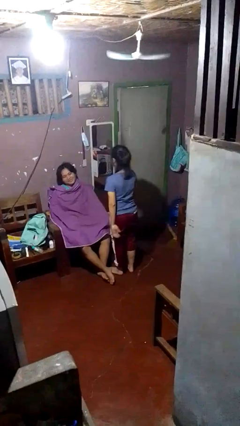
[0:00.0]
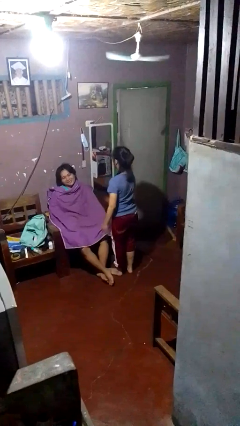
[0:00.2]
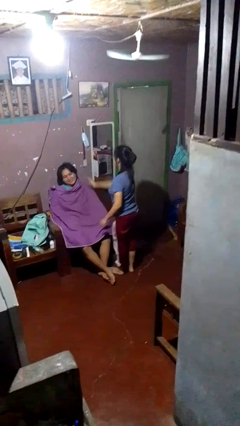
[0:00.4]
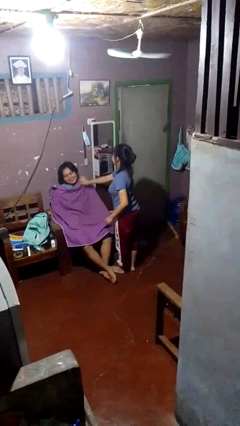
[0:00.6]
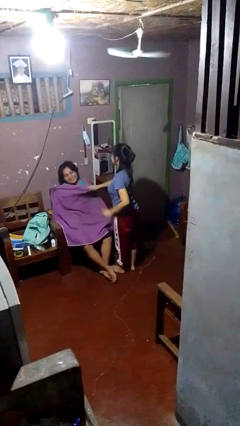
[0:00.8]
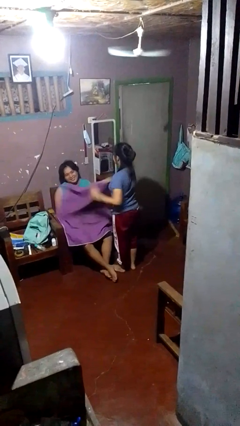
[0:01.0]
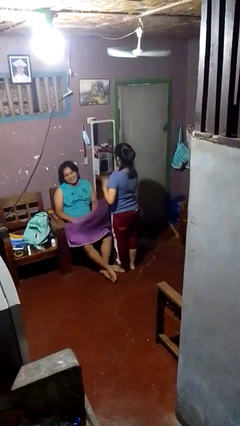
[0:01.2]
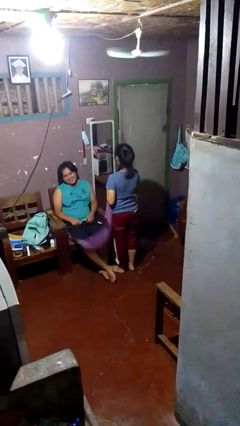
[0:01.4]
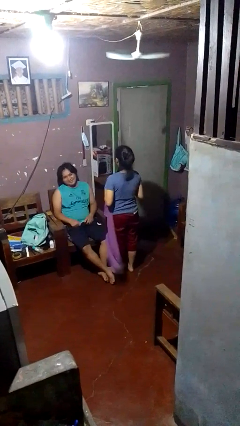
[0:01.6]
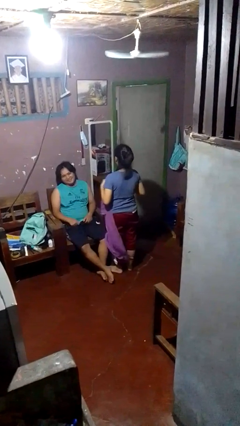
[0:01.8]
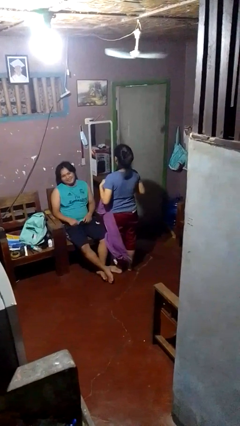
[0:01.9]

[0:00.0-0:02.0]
person uncovers friend with blanket

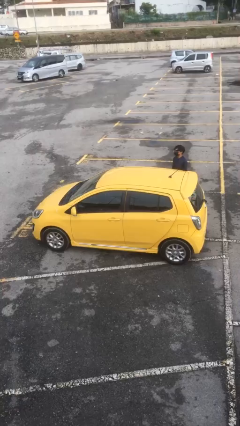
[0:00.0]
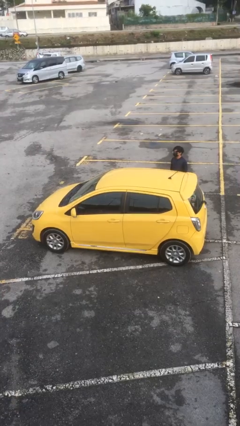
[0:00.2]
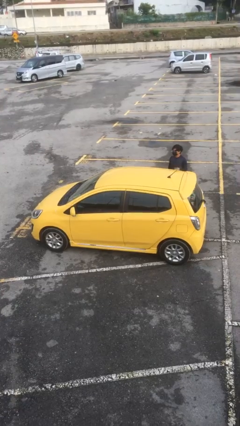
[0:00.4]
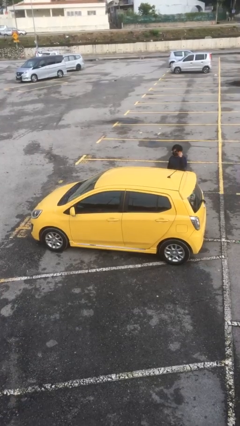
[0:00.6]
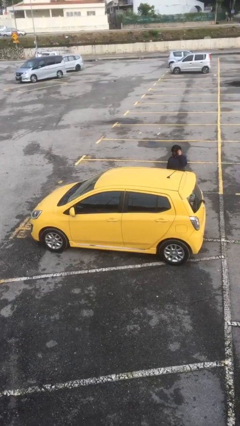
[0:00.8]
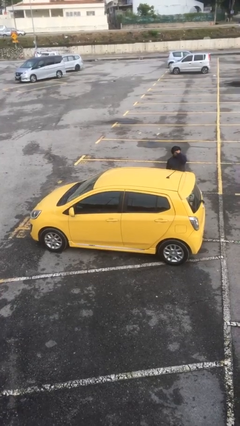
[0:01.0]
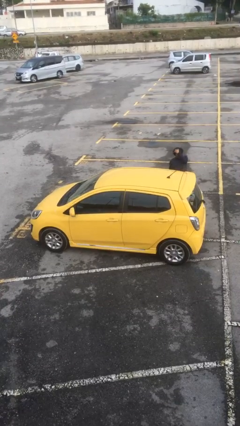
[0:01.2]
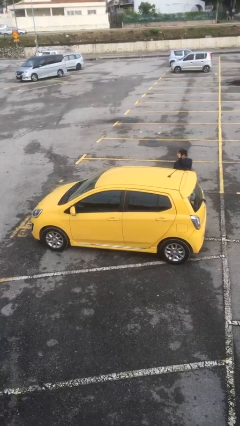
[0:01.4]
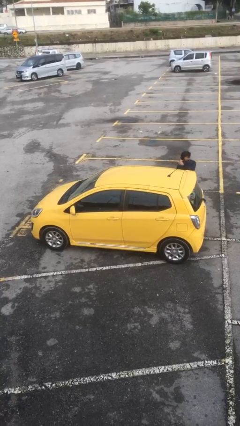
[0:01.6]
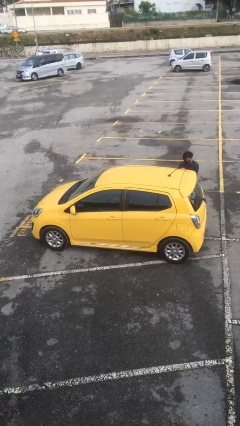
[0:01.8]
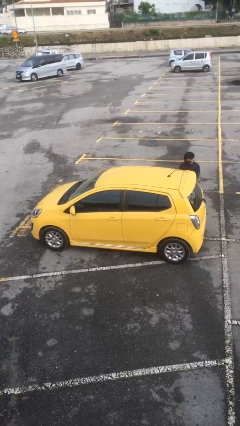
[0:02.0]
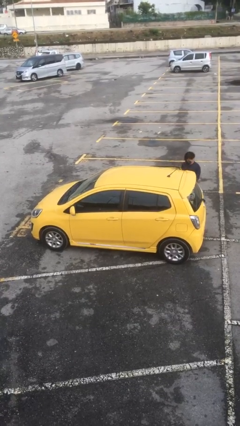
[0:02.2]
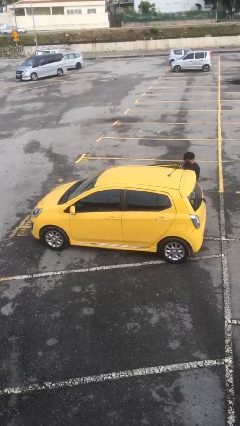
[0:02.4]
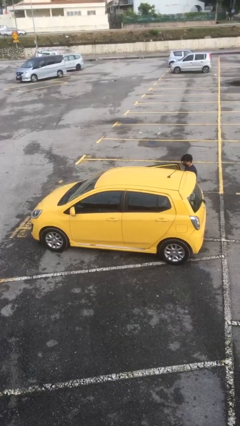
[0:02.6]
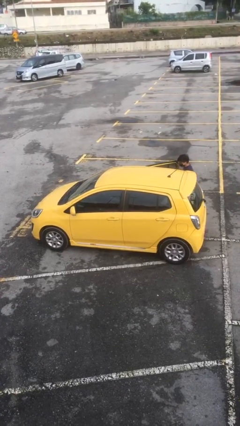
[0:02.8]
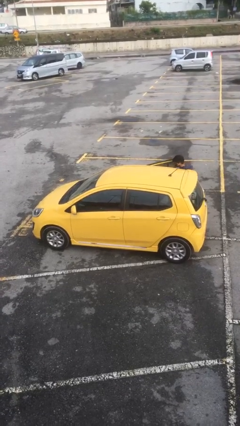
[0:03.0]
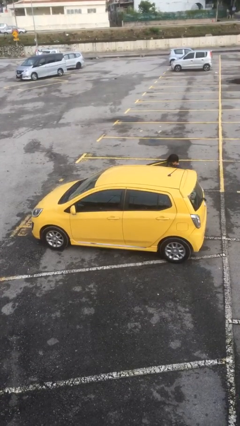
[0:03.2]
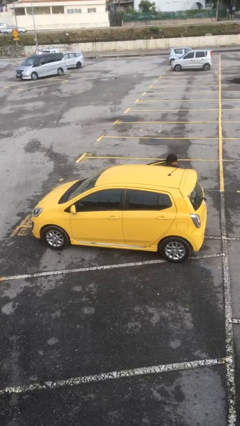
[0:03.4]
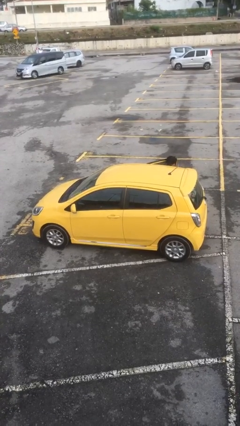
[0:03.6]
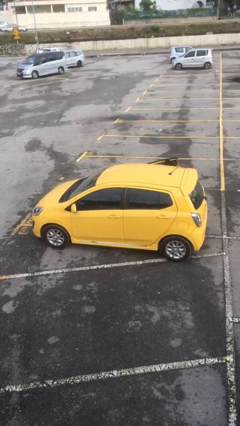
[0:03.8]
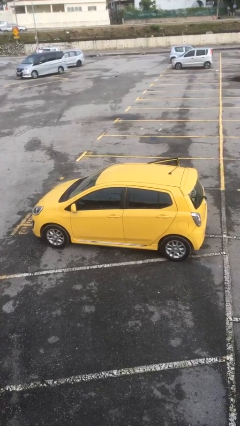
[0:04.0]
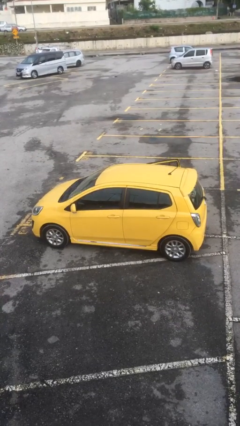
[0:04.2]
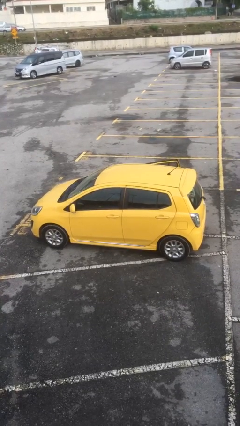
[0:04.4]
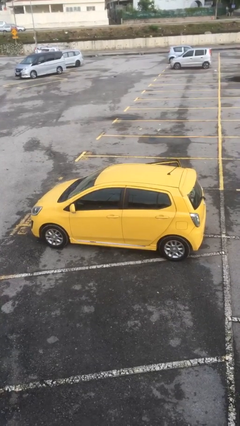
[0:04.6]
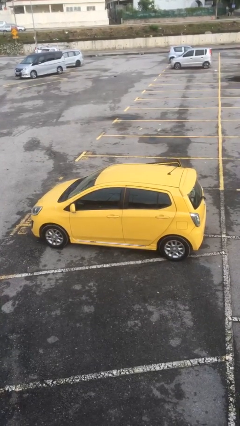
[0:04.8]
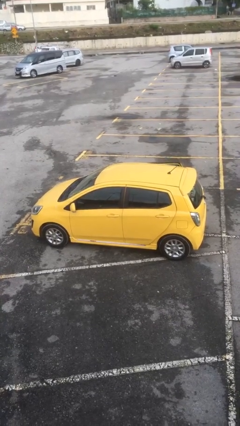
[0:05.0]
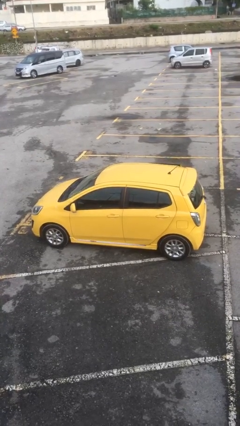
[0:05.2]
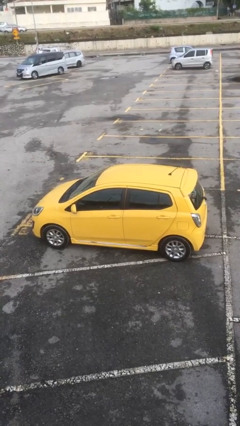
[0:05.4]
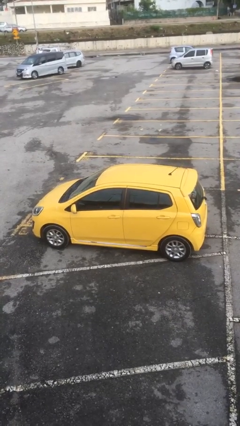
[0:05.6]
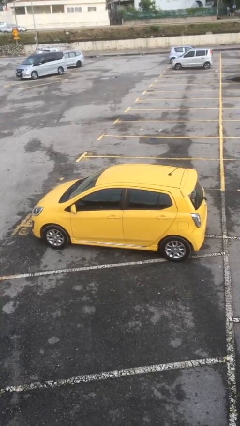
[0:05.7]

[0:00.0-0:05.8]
car picks up person

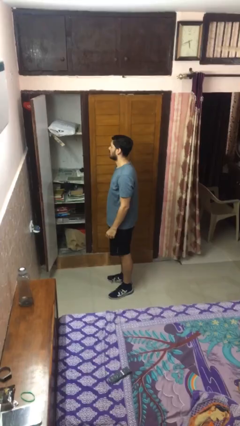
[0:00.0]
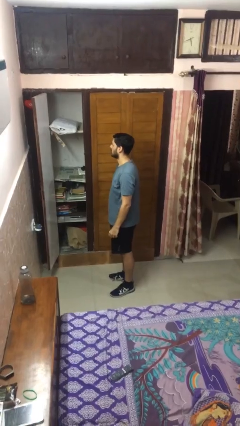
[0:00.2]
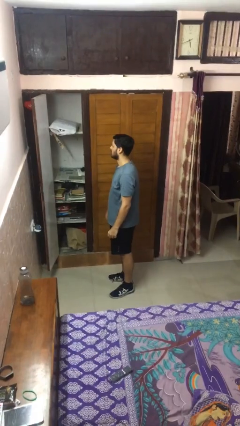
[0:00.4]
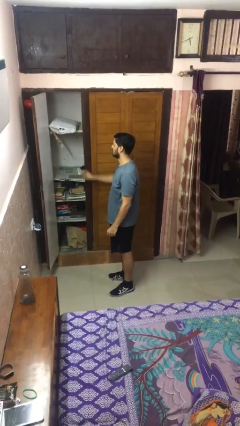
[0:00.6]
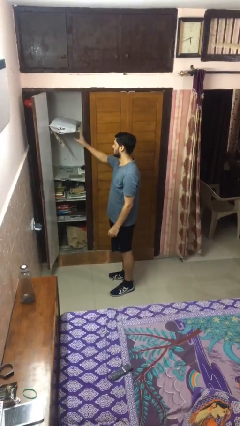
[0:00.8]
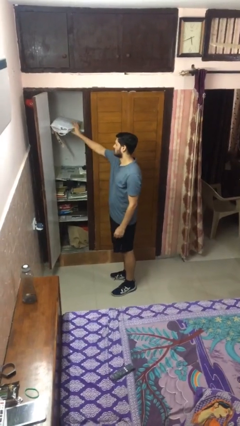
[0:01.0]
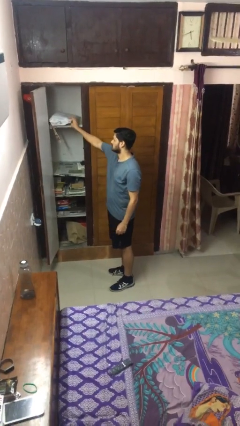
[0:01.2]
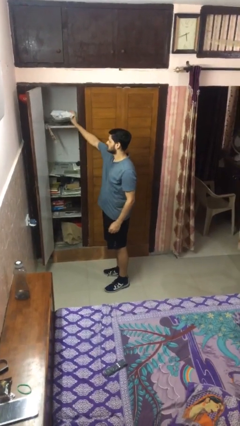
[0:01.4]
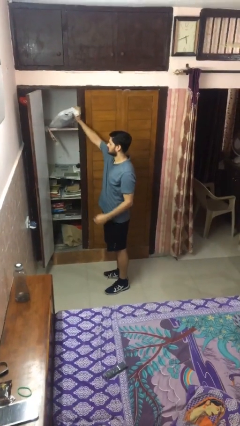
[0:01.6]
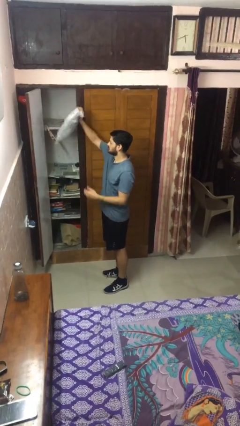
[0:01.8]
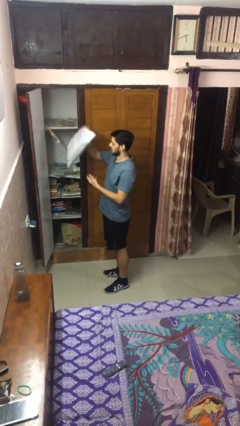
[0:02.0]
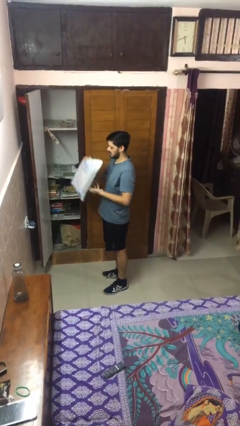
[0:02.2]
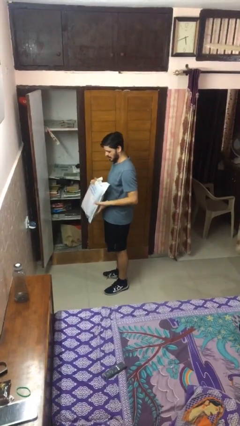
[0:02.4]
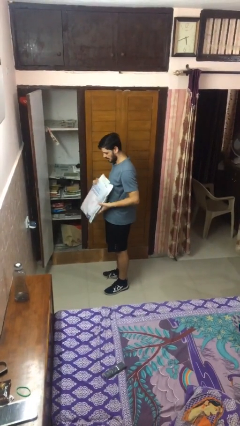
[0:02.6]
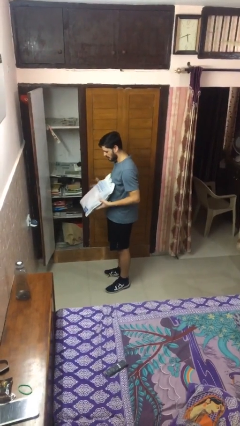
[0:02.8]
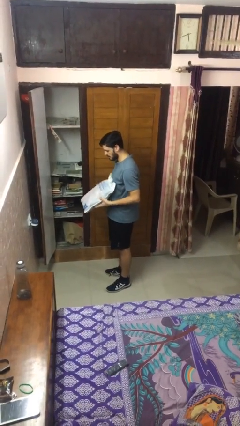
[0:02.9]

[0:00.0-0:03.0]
person picks up object from shelf

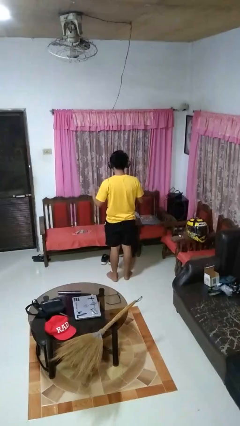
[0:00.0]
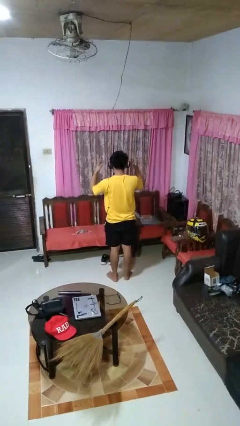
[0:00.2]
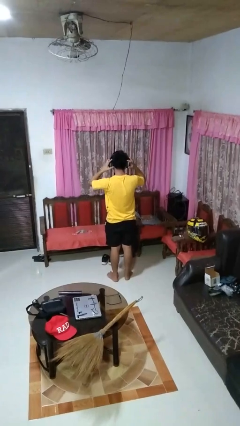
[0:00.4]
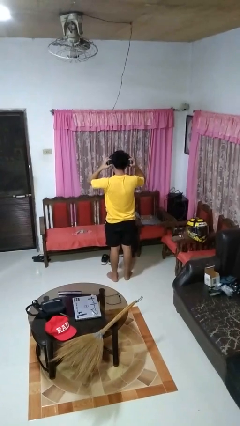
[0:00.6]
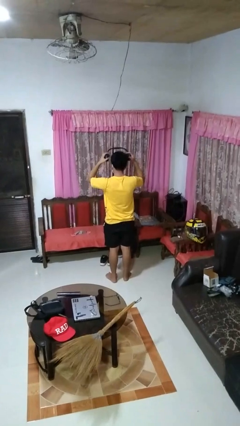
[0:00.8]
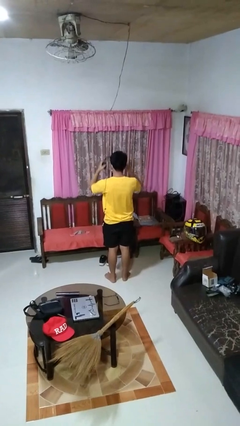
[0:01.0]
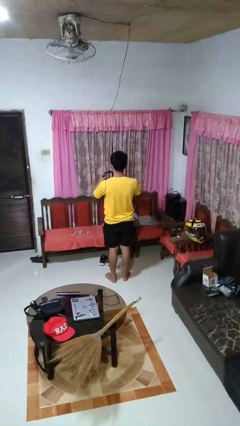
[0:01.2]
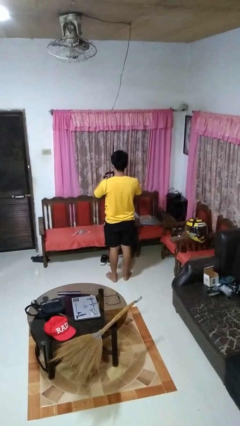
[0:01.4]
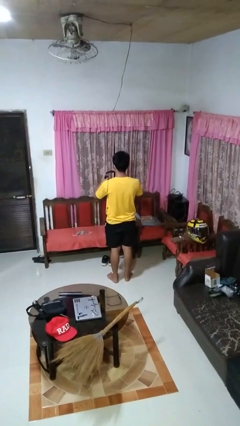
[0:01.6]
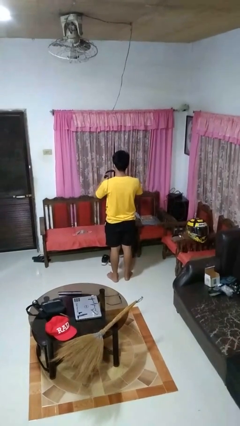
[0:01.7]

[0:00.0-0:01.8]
person takes off headphones

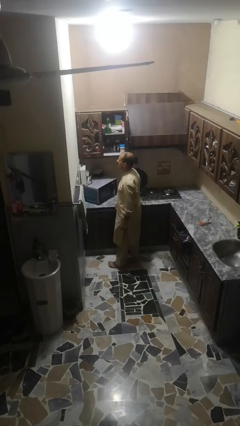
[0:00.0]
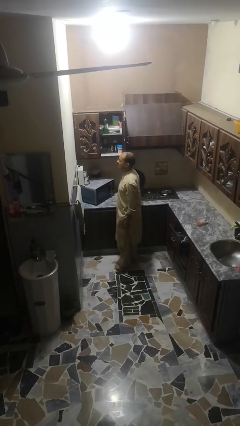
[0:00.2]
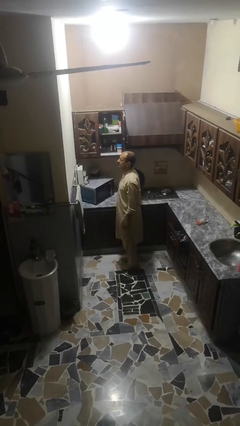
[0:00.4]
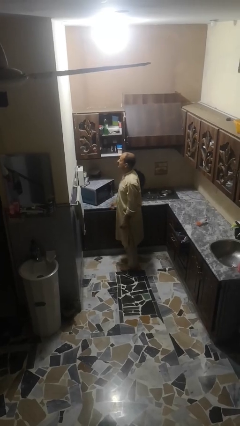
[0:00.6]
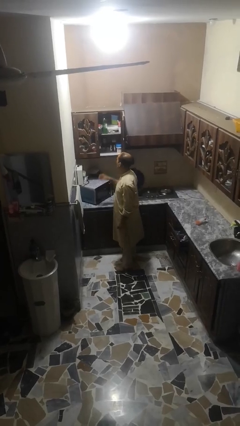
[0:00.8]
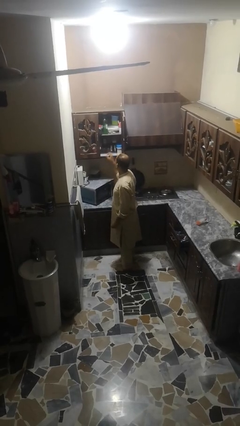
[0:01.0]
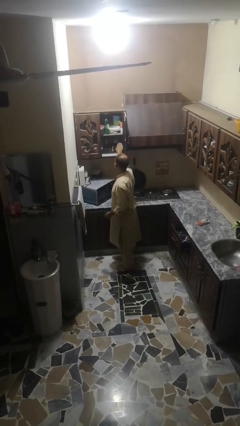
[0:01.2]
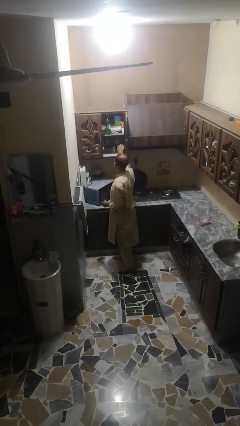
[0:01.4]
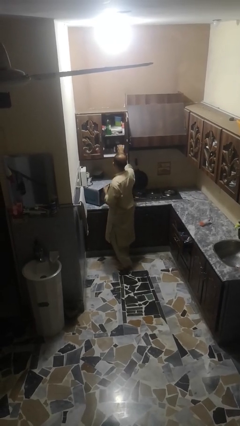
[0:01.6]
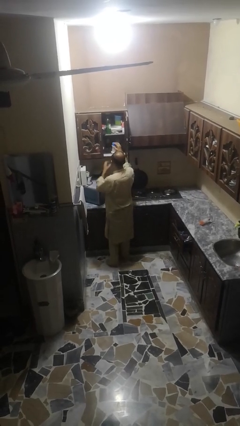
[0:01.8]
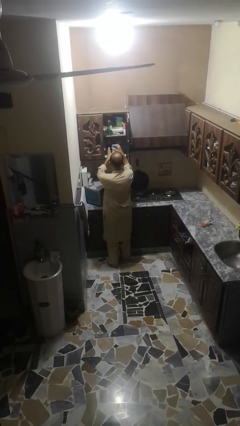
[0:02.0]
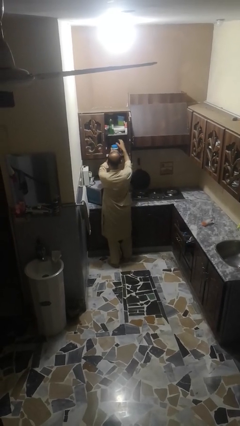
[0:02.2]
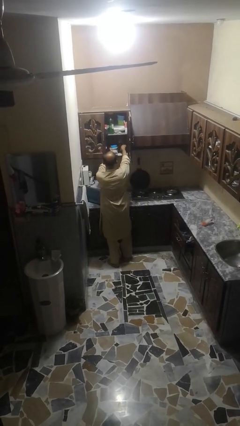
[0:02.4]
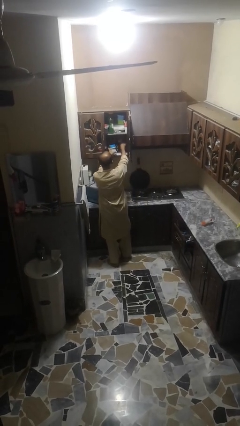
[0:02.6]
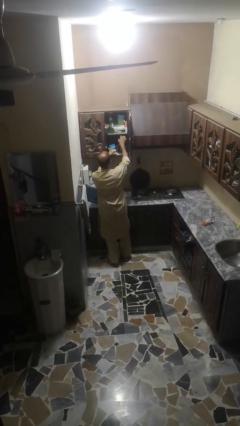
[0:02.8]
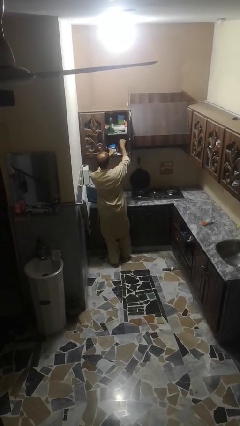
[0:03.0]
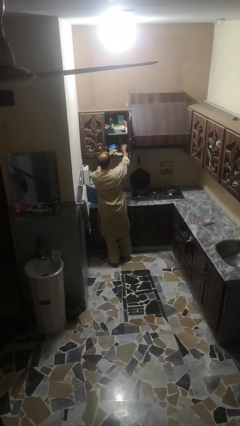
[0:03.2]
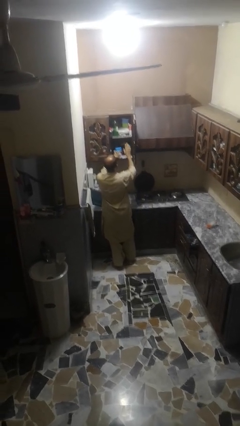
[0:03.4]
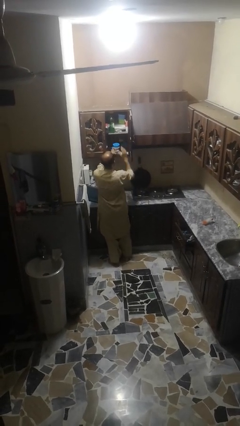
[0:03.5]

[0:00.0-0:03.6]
person searches in cabinet

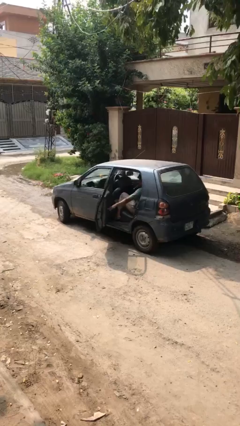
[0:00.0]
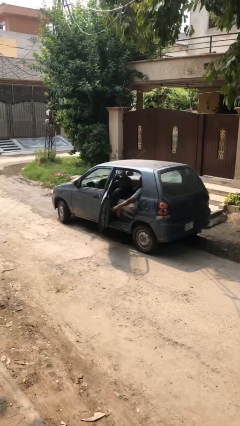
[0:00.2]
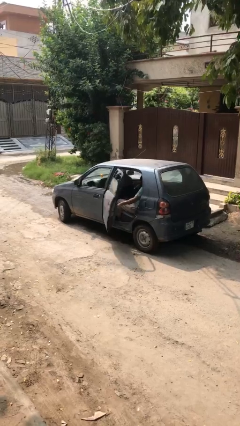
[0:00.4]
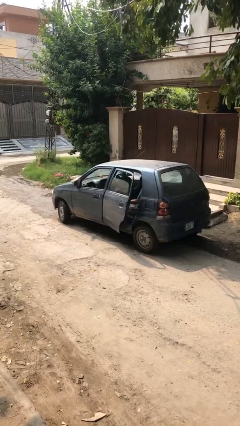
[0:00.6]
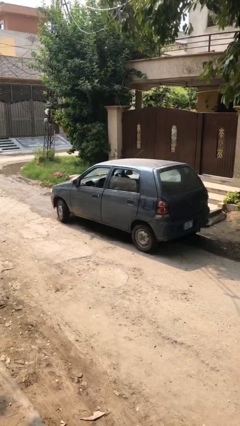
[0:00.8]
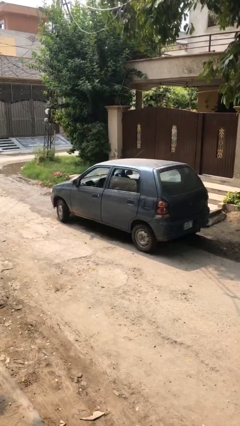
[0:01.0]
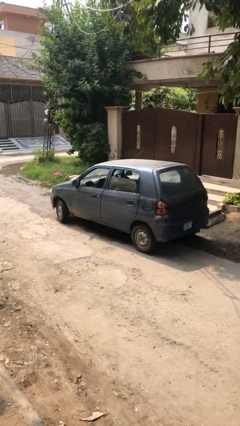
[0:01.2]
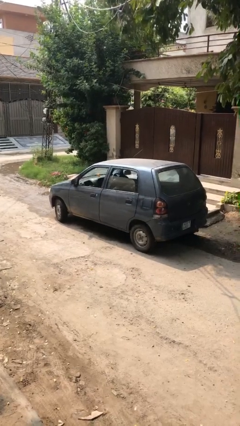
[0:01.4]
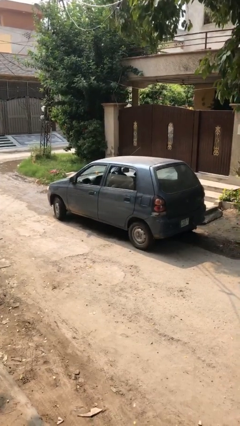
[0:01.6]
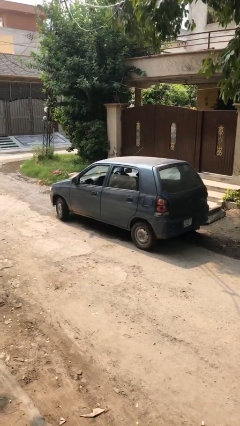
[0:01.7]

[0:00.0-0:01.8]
person closes car door
